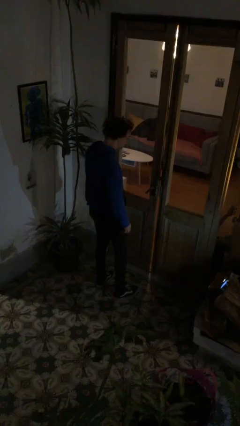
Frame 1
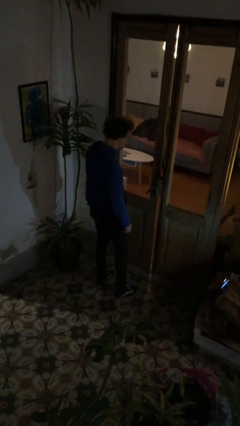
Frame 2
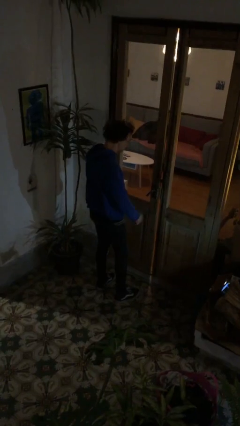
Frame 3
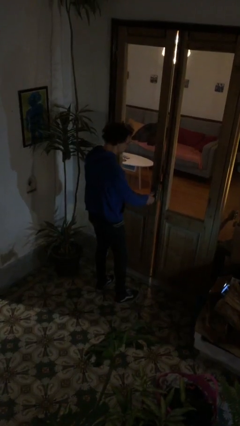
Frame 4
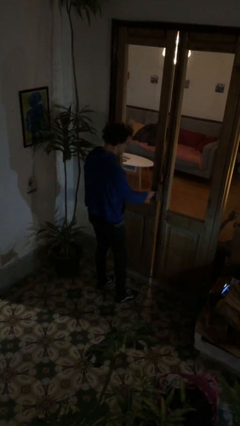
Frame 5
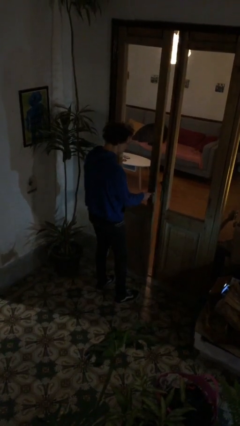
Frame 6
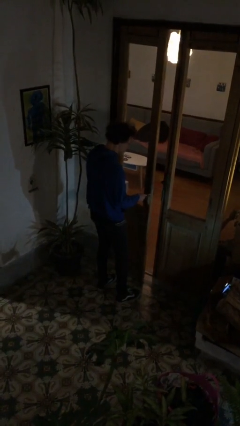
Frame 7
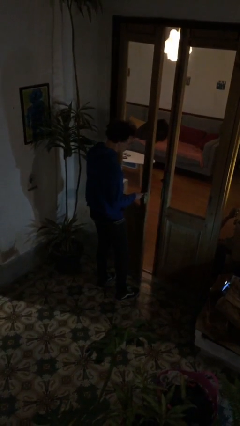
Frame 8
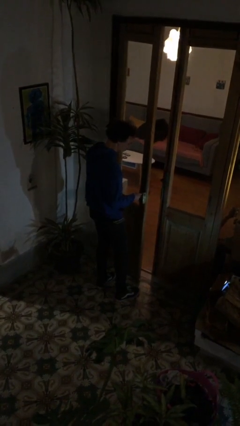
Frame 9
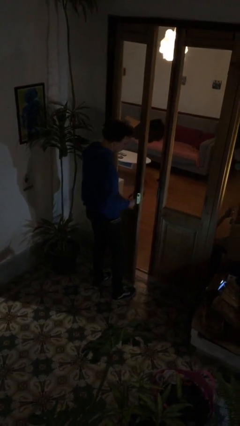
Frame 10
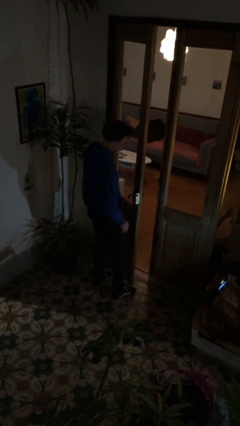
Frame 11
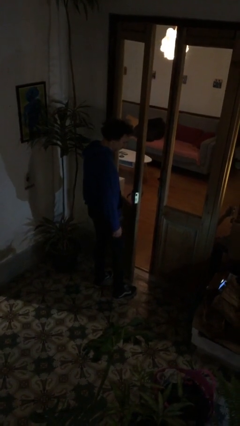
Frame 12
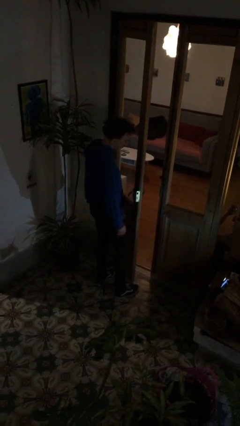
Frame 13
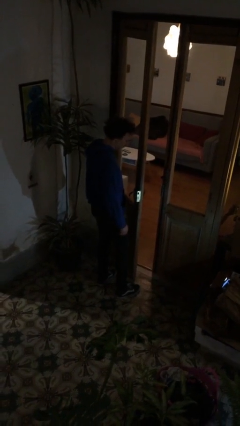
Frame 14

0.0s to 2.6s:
person opens facility door

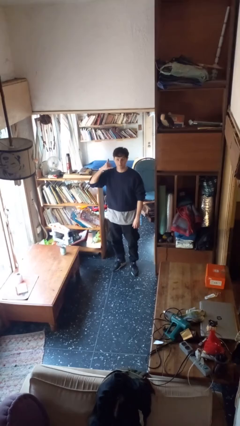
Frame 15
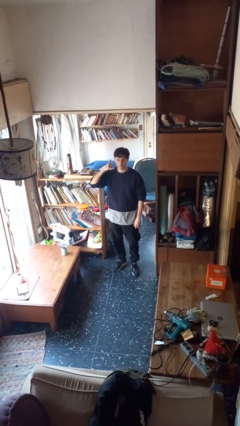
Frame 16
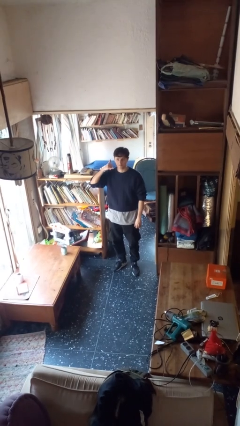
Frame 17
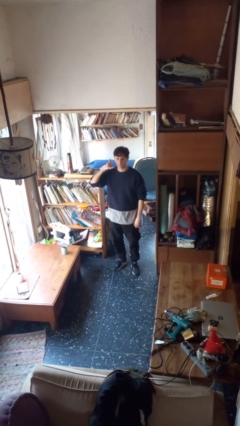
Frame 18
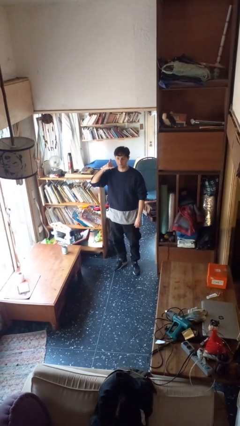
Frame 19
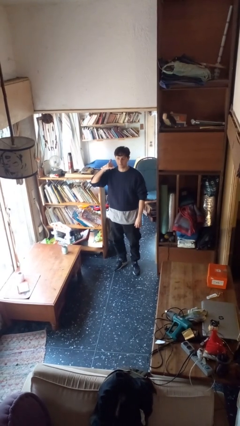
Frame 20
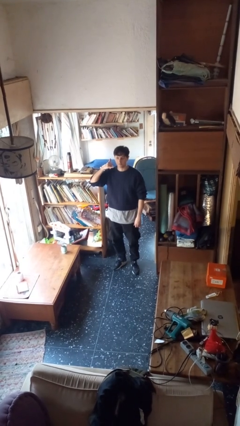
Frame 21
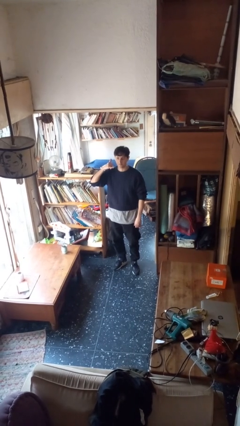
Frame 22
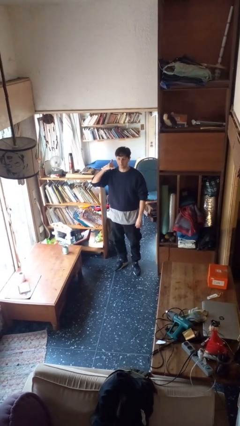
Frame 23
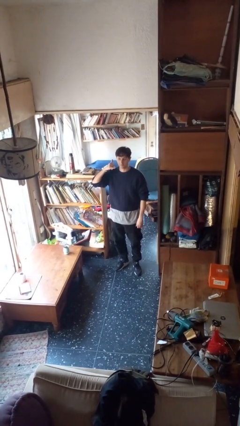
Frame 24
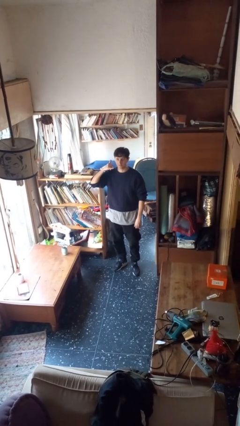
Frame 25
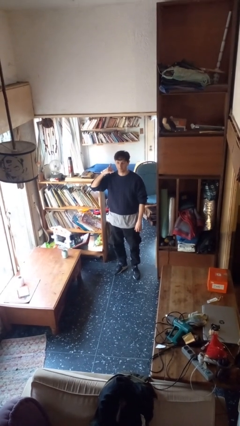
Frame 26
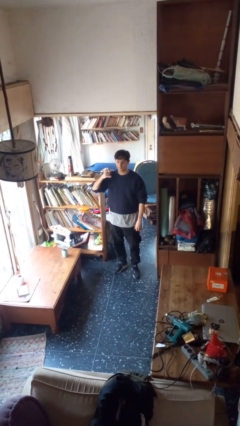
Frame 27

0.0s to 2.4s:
person gestures call me

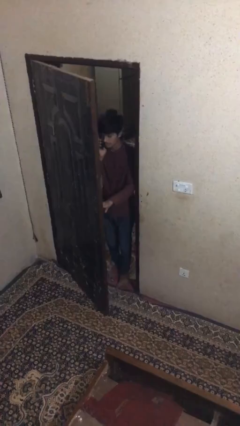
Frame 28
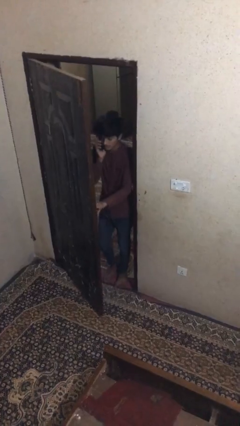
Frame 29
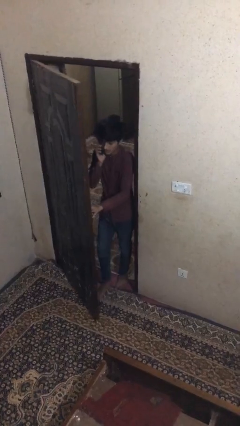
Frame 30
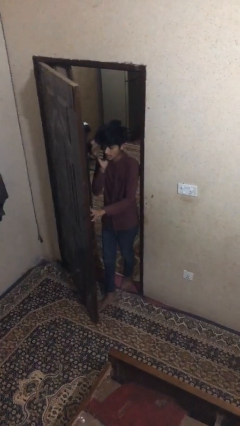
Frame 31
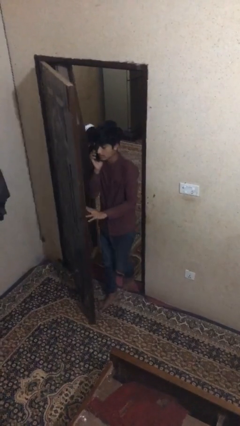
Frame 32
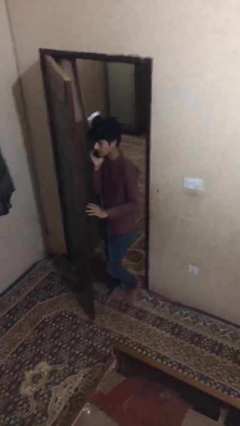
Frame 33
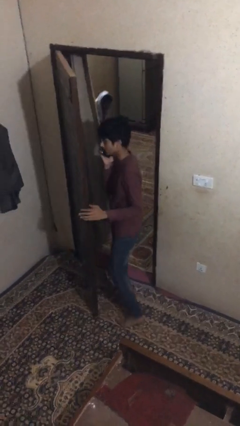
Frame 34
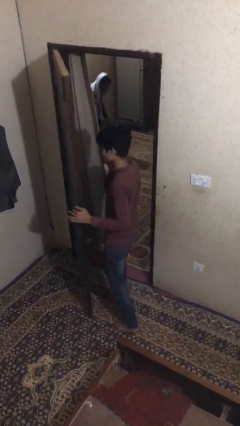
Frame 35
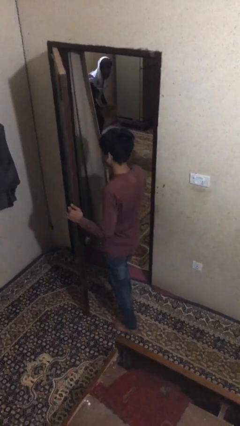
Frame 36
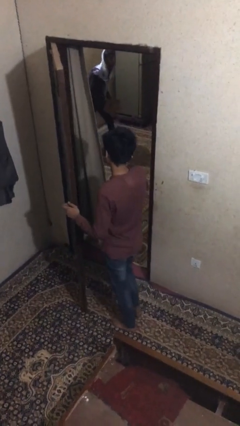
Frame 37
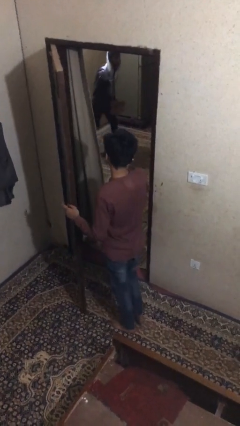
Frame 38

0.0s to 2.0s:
person enters scene through structure

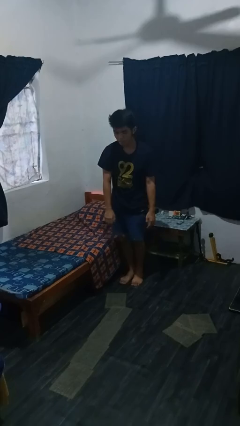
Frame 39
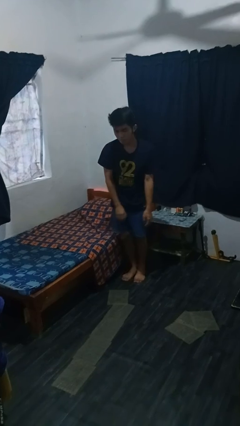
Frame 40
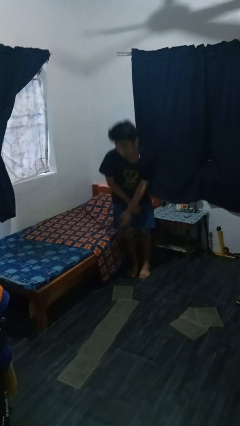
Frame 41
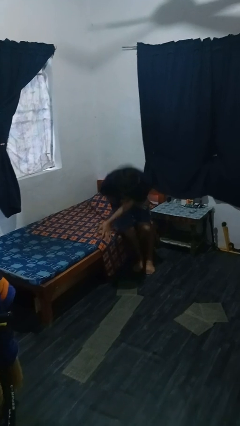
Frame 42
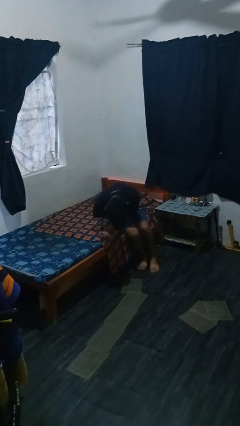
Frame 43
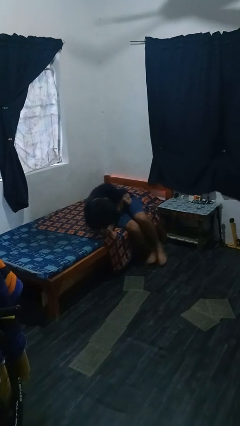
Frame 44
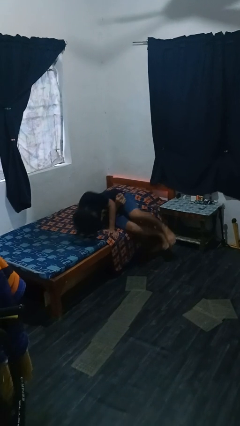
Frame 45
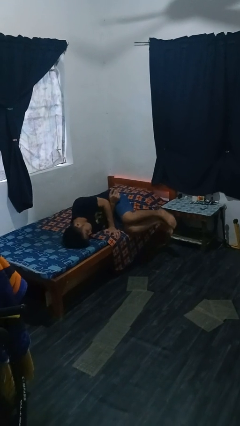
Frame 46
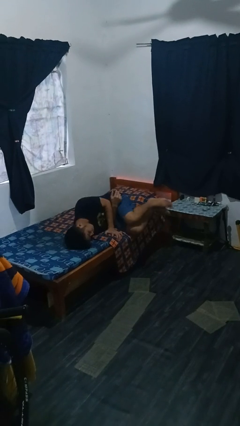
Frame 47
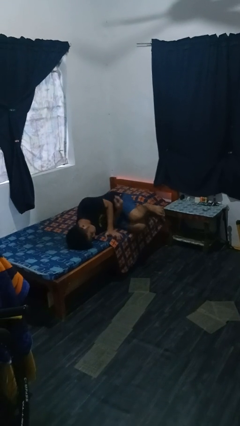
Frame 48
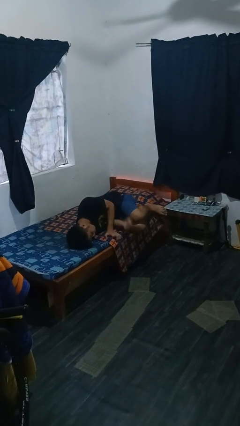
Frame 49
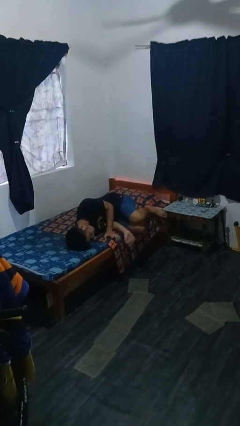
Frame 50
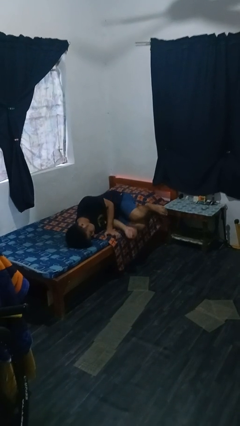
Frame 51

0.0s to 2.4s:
person lies down on bed

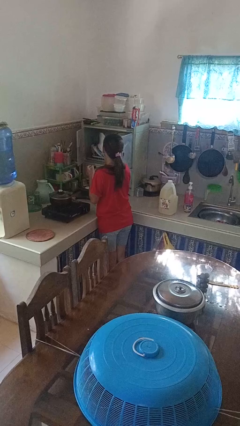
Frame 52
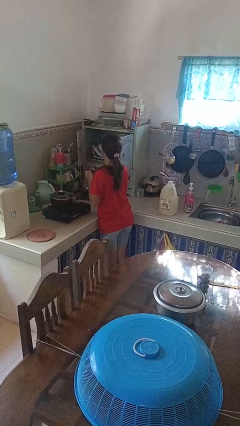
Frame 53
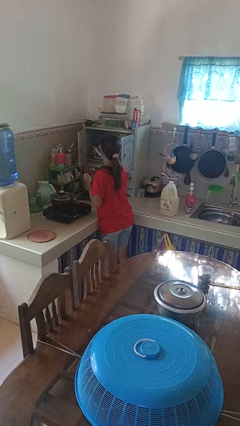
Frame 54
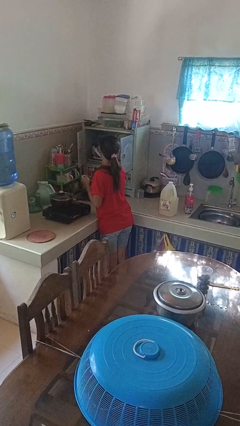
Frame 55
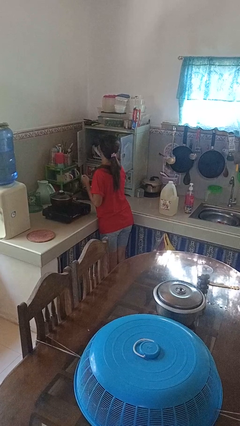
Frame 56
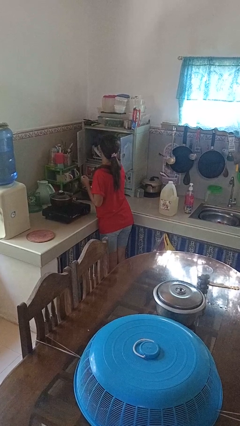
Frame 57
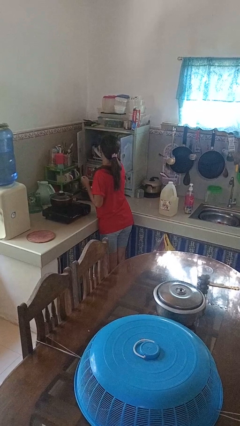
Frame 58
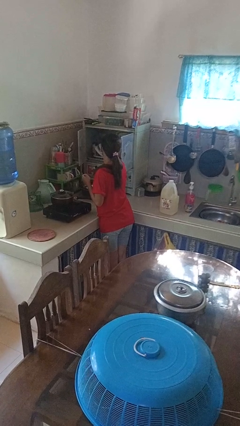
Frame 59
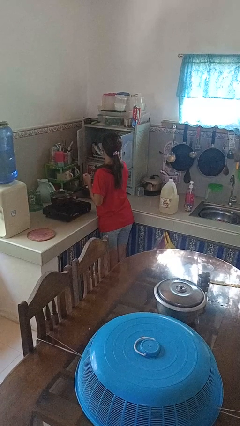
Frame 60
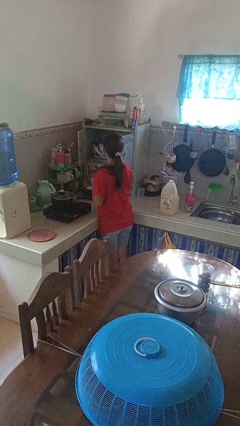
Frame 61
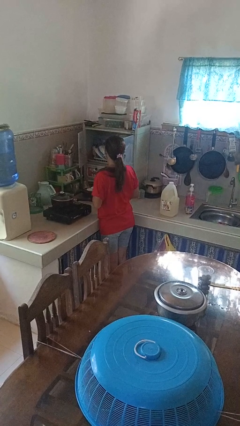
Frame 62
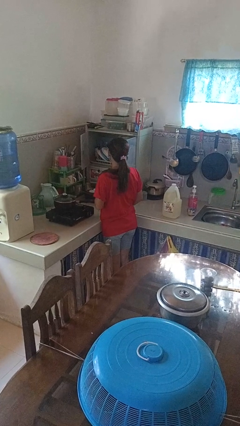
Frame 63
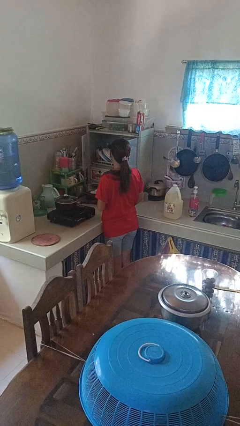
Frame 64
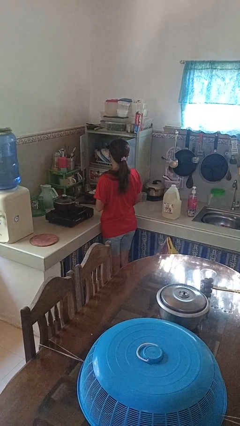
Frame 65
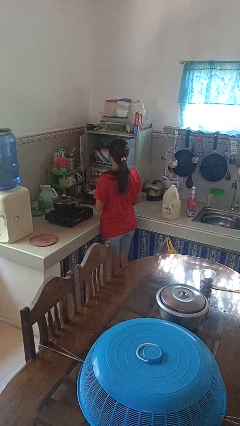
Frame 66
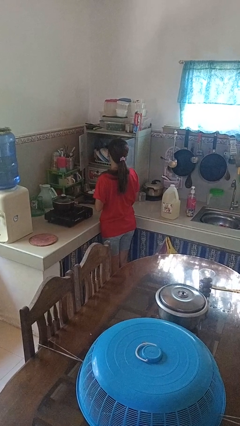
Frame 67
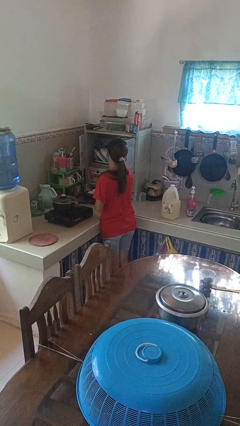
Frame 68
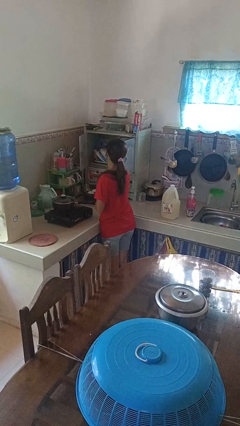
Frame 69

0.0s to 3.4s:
person puts object in cabinet

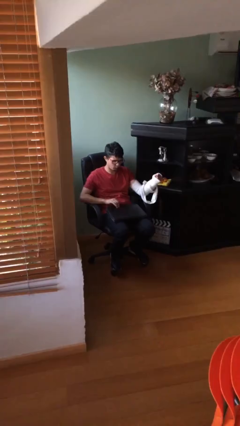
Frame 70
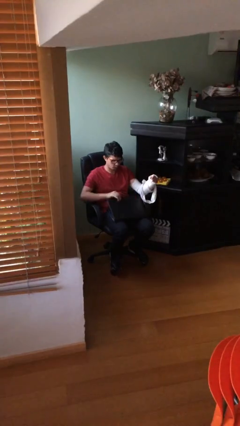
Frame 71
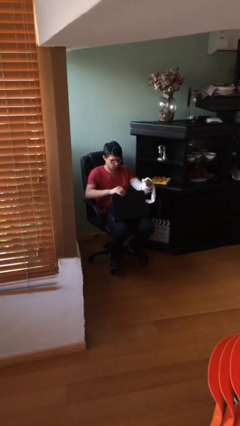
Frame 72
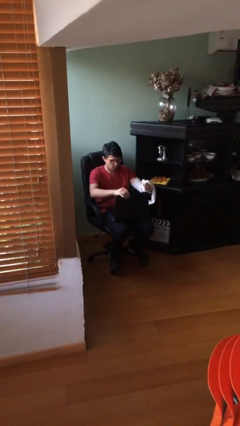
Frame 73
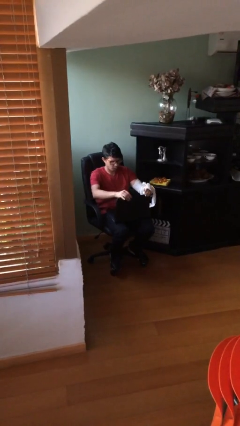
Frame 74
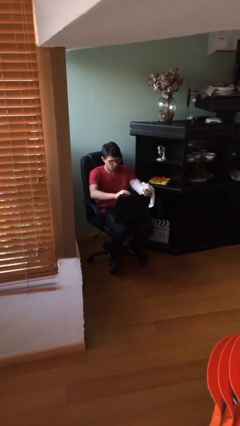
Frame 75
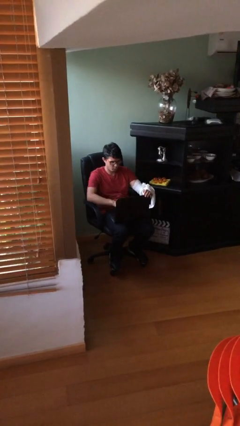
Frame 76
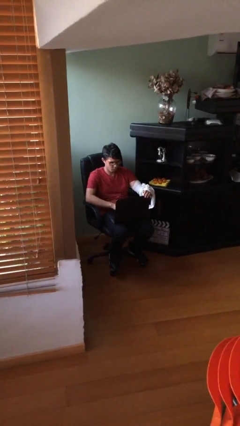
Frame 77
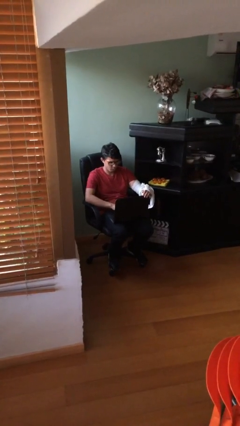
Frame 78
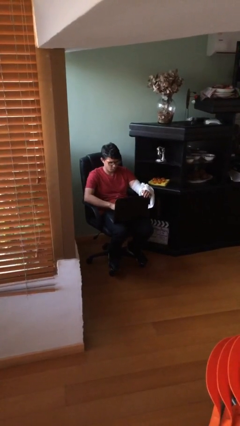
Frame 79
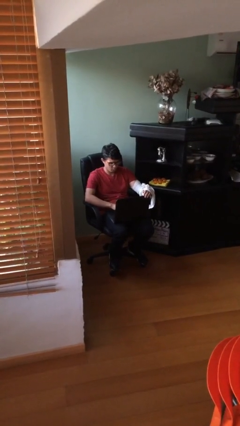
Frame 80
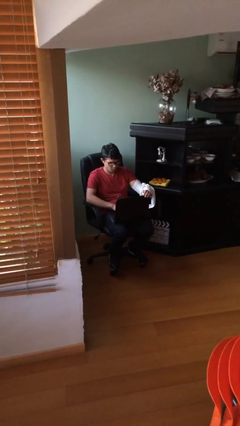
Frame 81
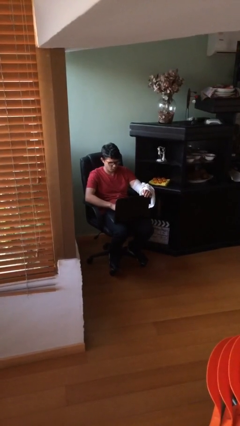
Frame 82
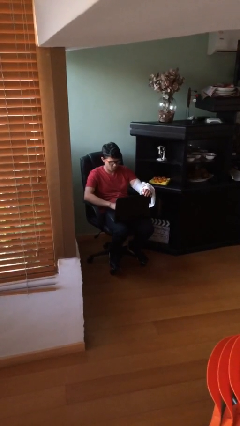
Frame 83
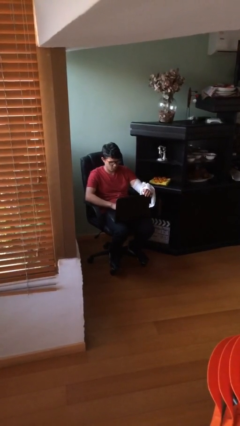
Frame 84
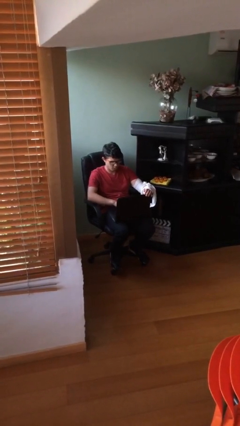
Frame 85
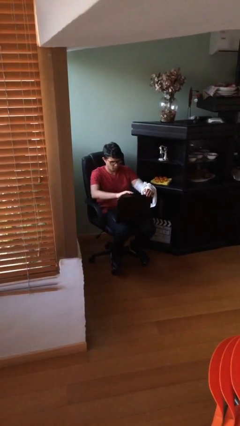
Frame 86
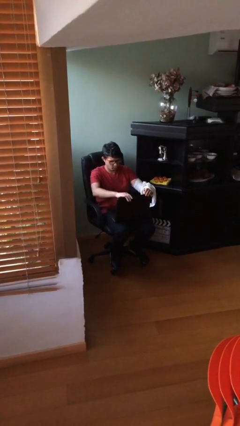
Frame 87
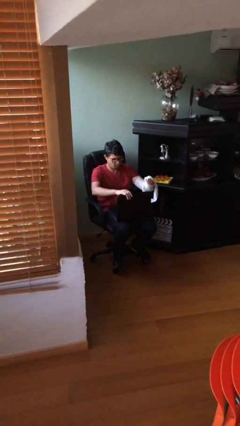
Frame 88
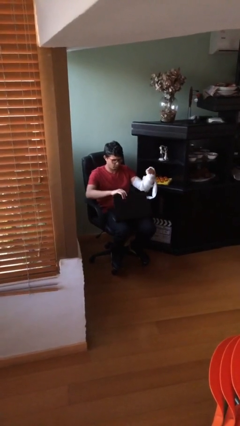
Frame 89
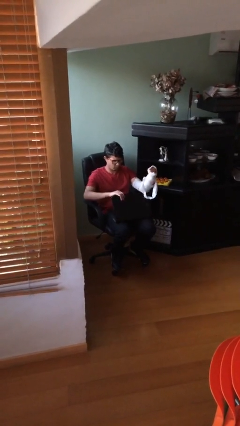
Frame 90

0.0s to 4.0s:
person interacts with laptop

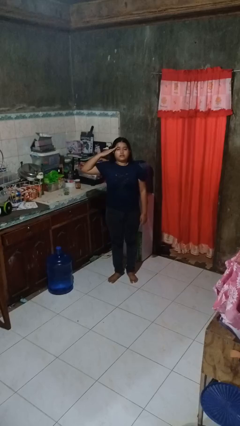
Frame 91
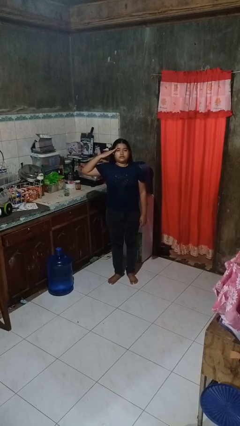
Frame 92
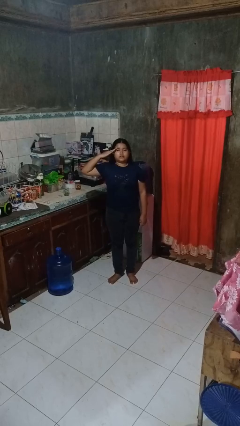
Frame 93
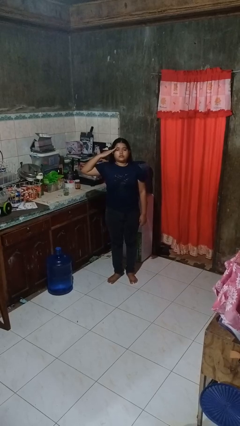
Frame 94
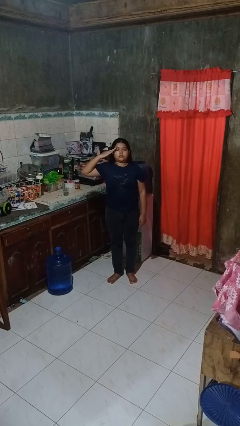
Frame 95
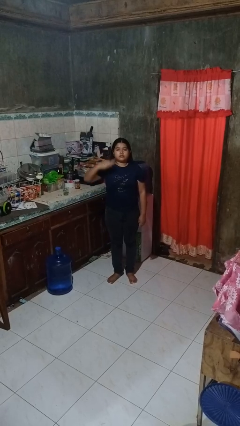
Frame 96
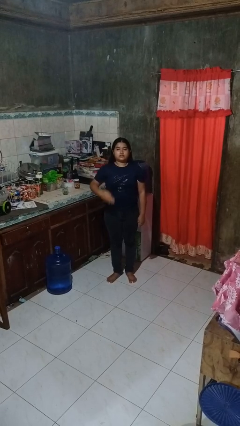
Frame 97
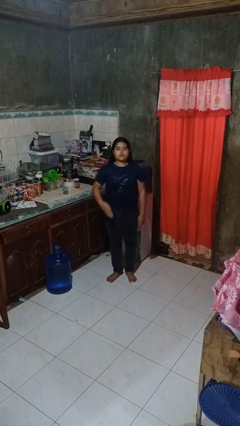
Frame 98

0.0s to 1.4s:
person salutes
